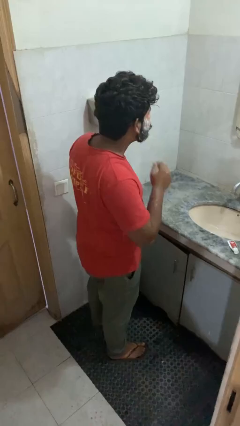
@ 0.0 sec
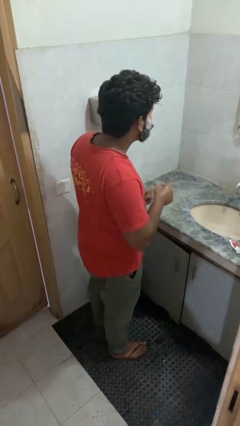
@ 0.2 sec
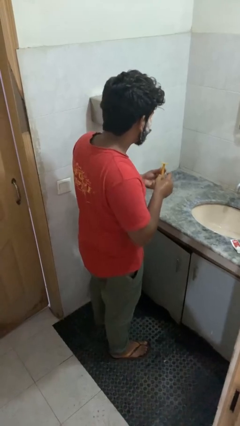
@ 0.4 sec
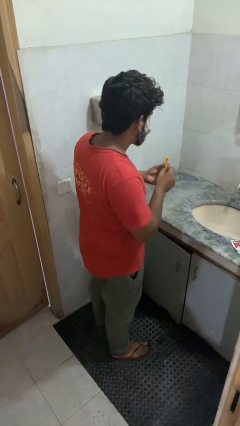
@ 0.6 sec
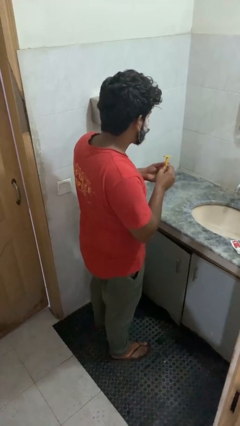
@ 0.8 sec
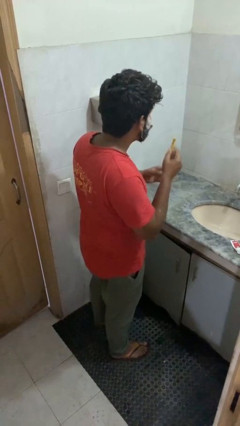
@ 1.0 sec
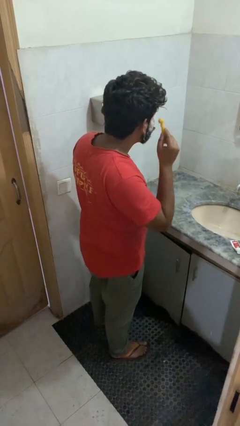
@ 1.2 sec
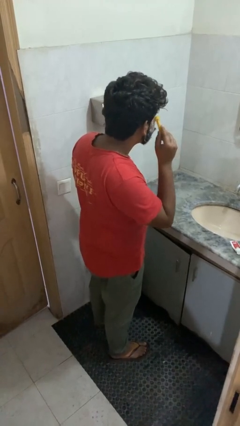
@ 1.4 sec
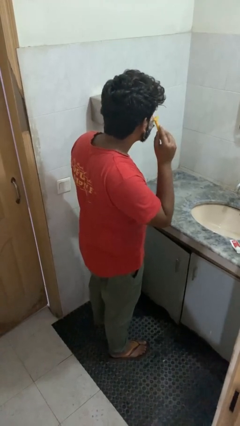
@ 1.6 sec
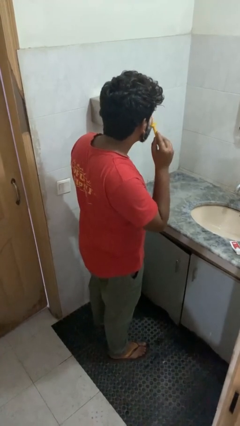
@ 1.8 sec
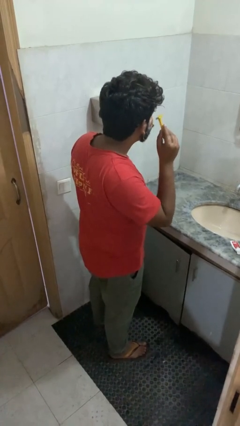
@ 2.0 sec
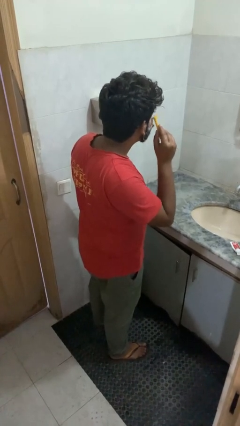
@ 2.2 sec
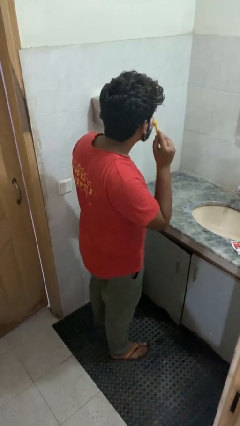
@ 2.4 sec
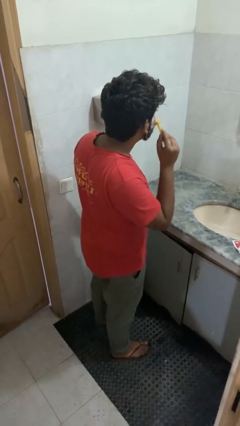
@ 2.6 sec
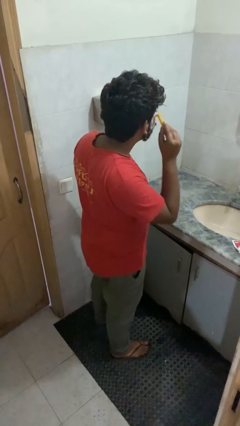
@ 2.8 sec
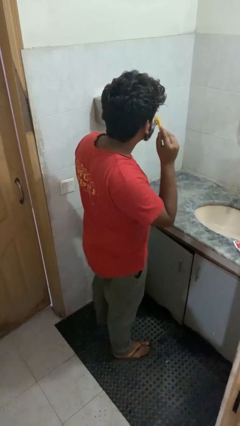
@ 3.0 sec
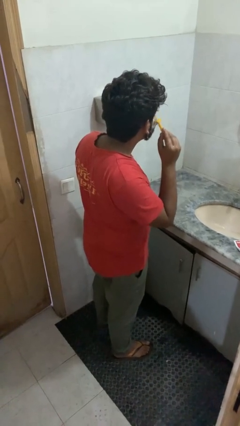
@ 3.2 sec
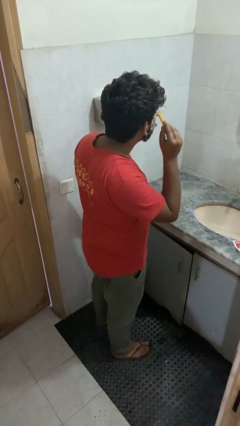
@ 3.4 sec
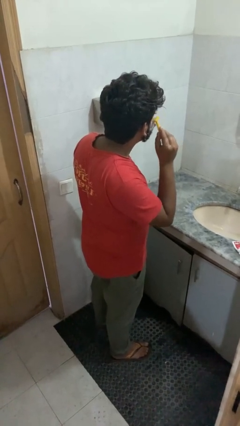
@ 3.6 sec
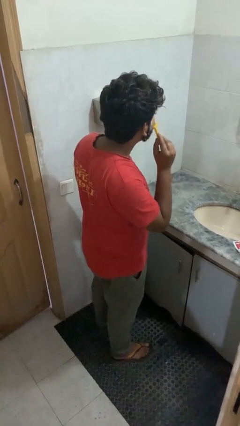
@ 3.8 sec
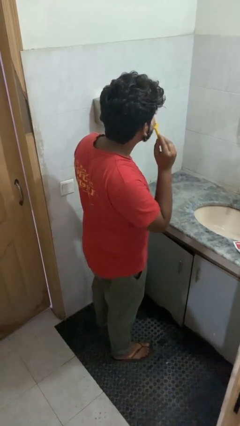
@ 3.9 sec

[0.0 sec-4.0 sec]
person shaves face

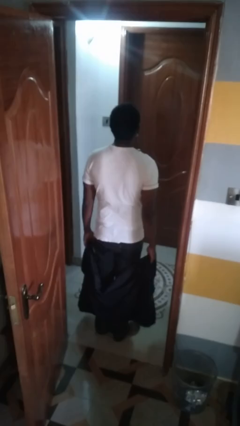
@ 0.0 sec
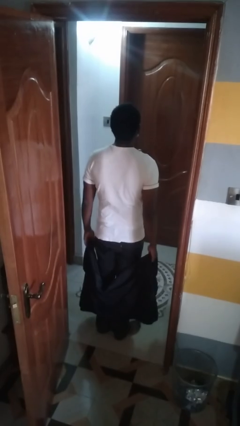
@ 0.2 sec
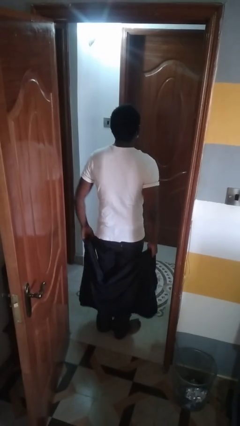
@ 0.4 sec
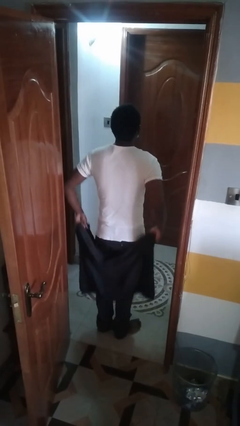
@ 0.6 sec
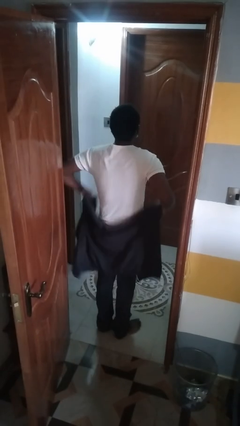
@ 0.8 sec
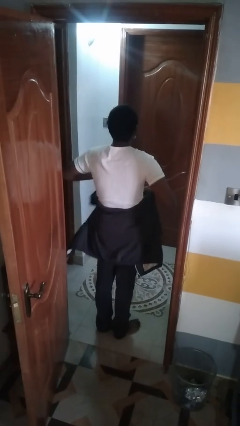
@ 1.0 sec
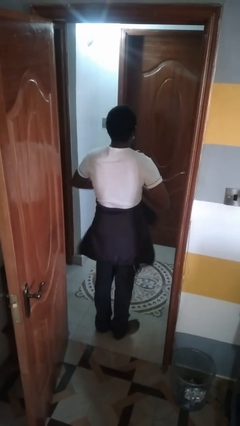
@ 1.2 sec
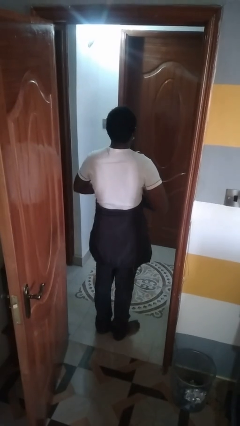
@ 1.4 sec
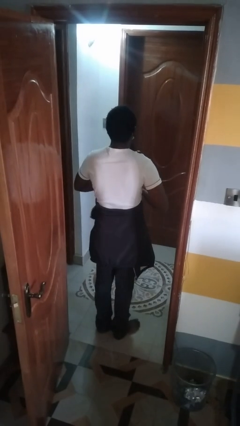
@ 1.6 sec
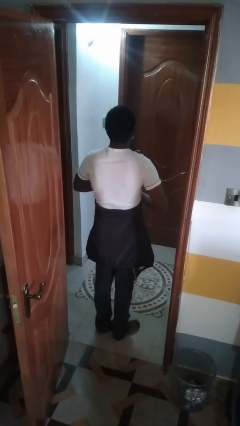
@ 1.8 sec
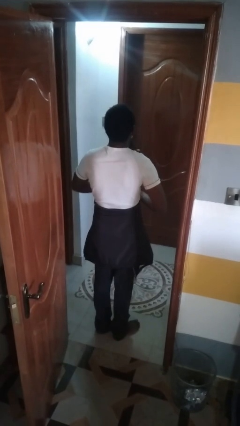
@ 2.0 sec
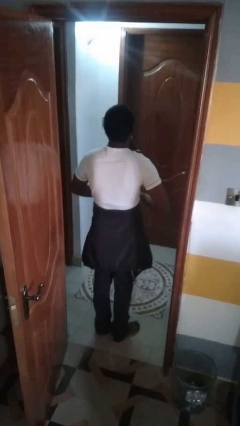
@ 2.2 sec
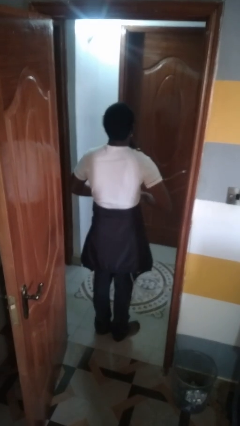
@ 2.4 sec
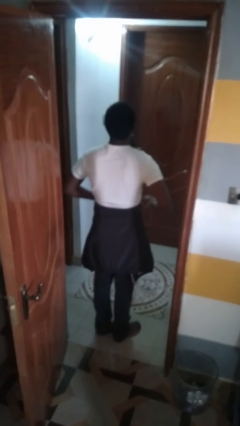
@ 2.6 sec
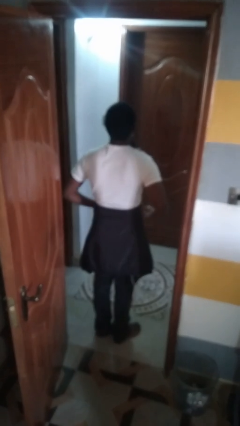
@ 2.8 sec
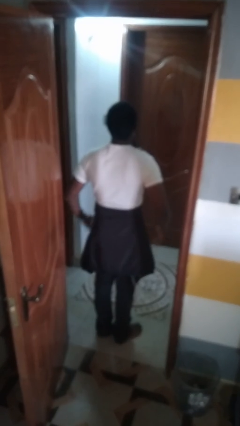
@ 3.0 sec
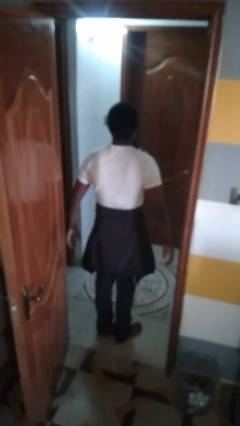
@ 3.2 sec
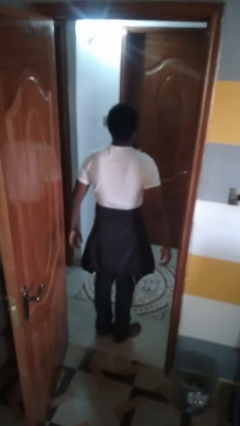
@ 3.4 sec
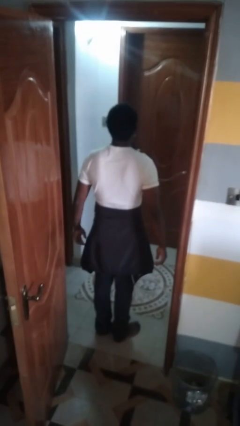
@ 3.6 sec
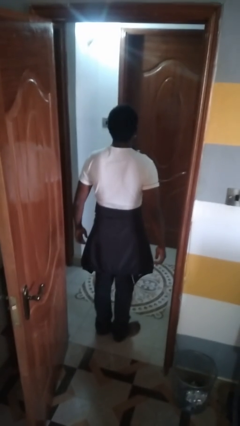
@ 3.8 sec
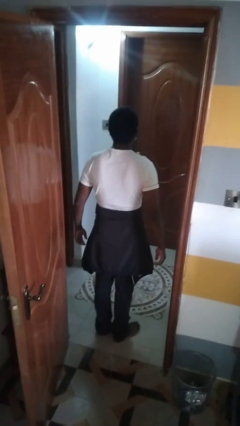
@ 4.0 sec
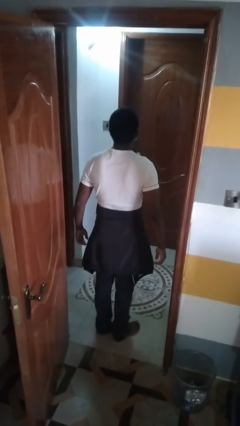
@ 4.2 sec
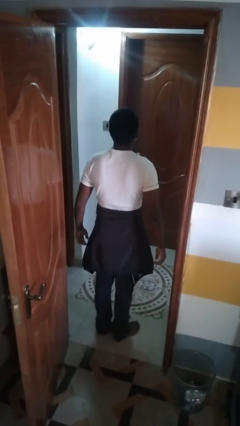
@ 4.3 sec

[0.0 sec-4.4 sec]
person ties jacket around waist

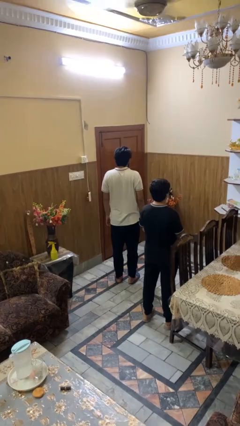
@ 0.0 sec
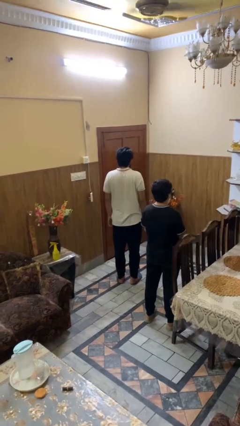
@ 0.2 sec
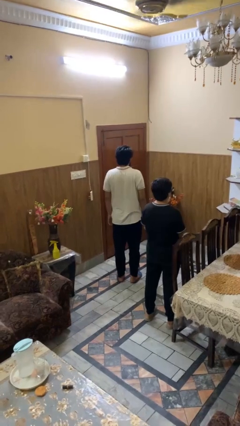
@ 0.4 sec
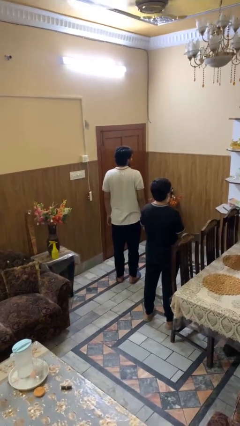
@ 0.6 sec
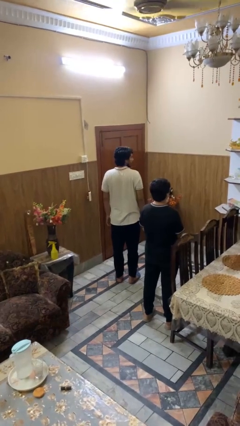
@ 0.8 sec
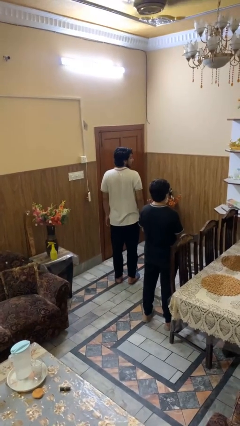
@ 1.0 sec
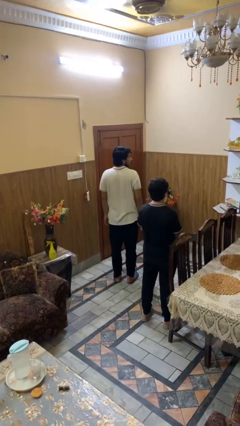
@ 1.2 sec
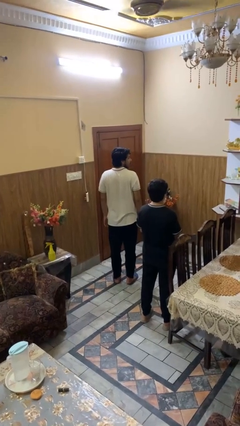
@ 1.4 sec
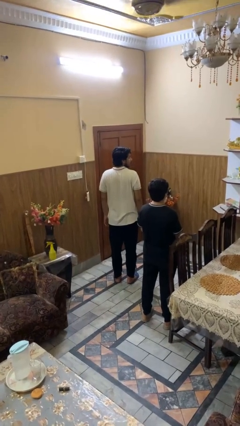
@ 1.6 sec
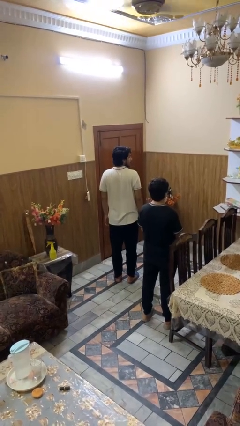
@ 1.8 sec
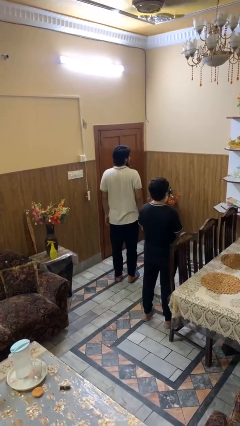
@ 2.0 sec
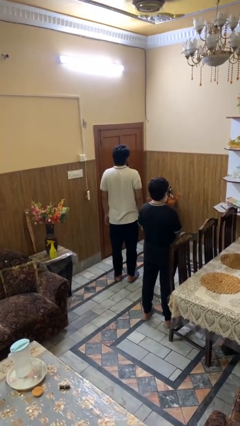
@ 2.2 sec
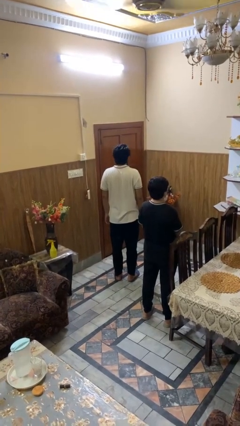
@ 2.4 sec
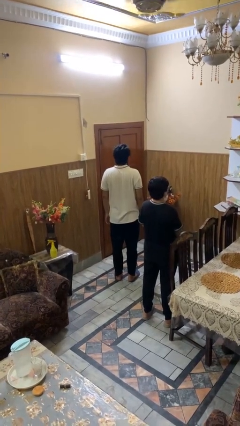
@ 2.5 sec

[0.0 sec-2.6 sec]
person looks over shoulder

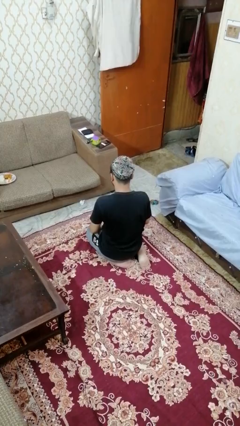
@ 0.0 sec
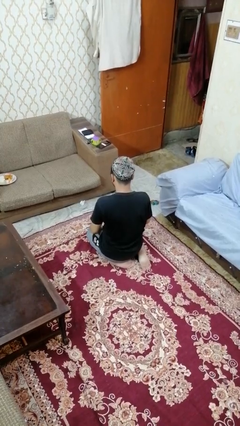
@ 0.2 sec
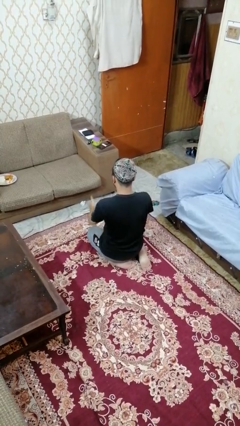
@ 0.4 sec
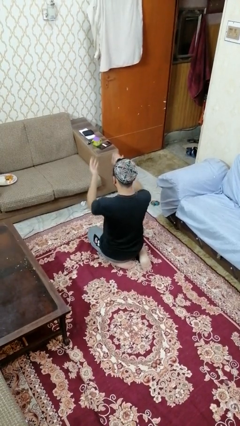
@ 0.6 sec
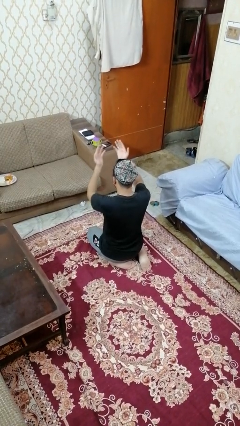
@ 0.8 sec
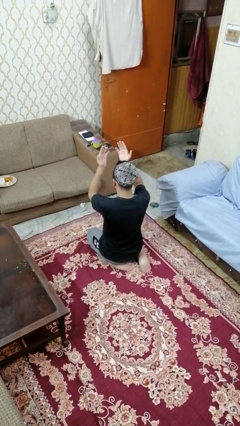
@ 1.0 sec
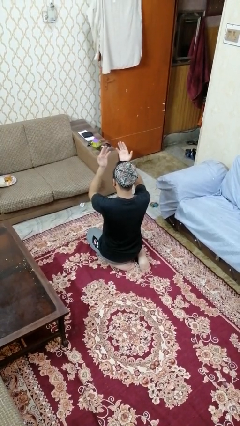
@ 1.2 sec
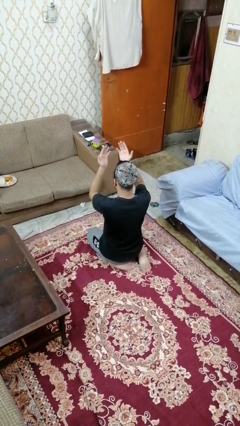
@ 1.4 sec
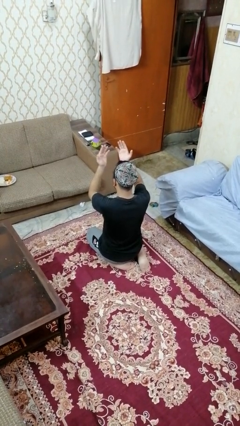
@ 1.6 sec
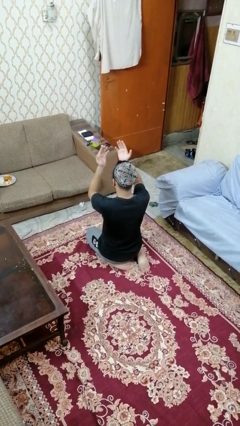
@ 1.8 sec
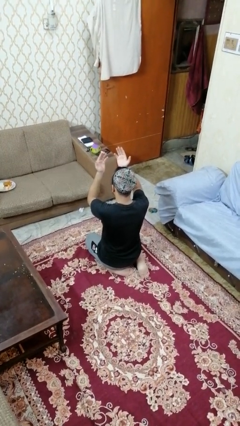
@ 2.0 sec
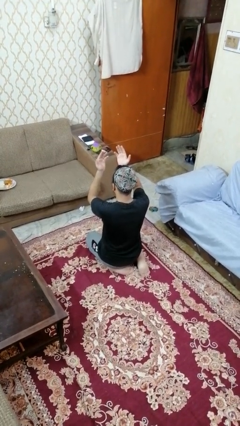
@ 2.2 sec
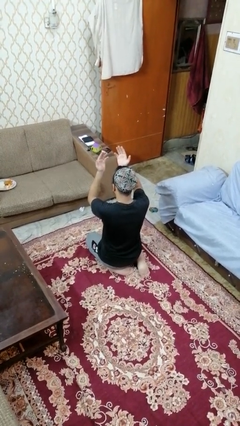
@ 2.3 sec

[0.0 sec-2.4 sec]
person prays

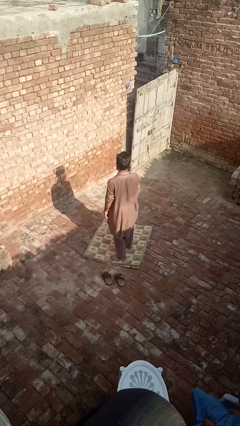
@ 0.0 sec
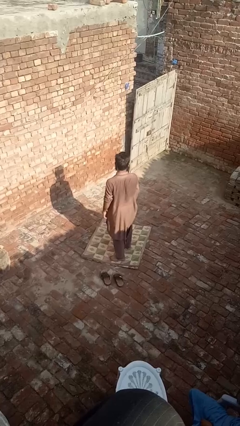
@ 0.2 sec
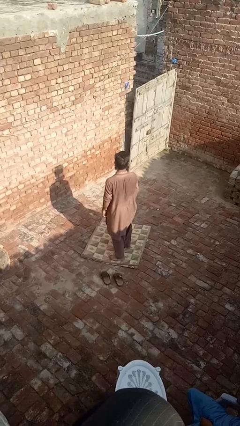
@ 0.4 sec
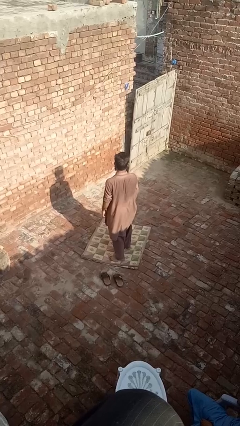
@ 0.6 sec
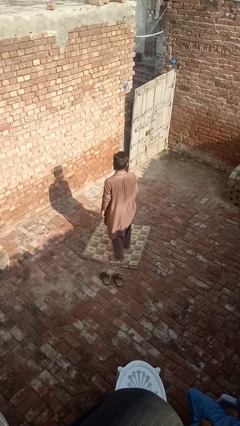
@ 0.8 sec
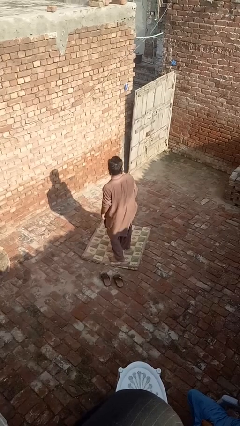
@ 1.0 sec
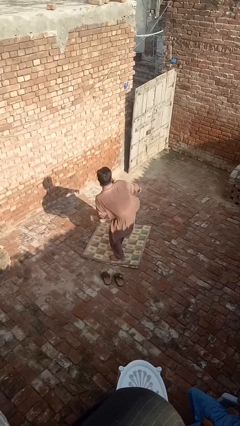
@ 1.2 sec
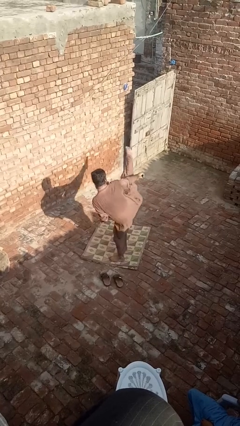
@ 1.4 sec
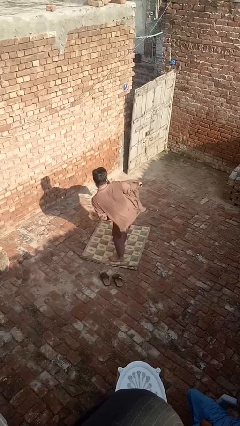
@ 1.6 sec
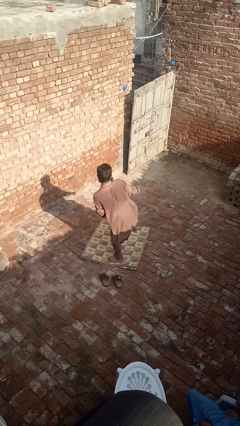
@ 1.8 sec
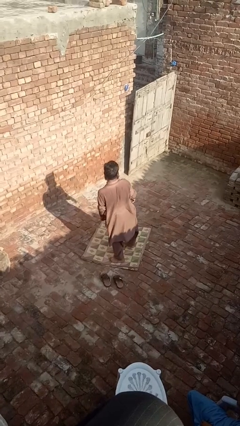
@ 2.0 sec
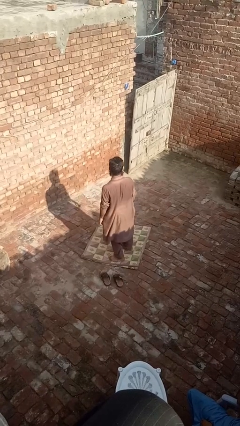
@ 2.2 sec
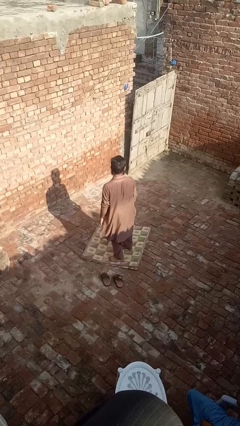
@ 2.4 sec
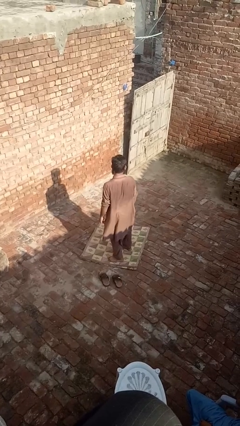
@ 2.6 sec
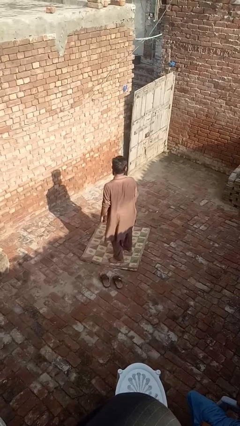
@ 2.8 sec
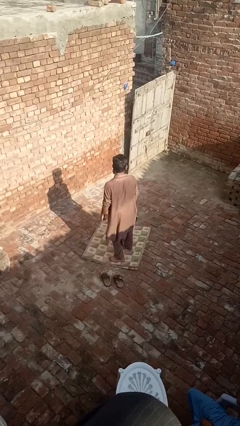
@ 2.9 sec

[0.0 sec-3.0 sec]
person karate kicks

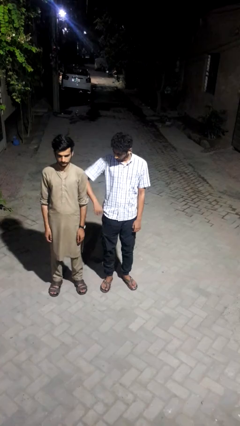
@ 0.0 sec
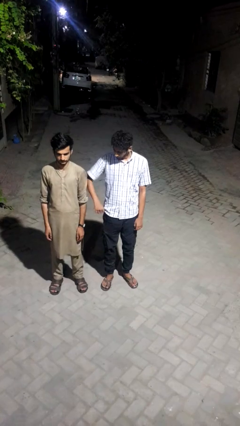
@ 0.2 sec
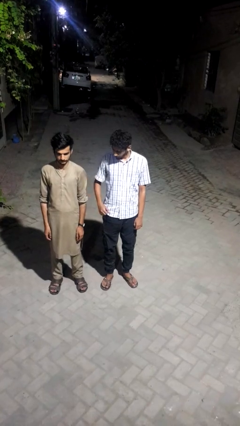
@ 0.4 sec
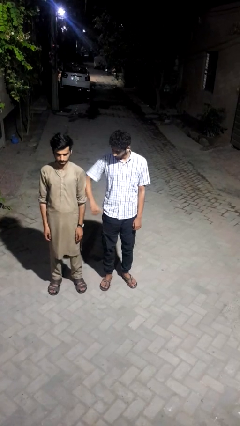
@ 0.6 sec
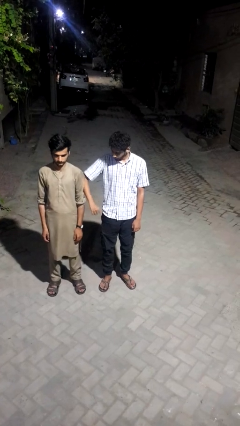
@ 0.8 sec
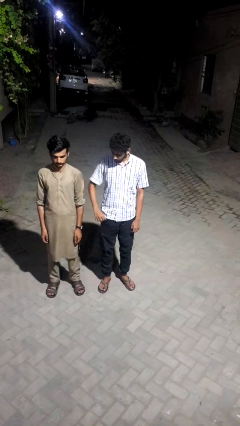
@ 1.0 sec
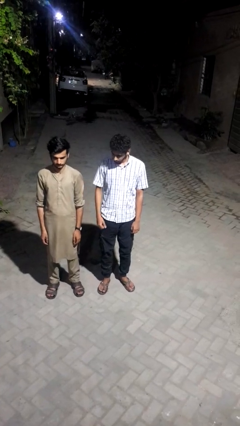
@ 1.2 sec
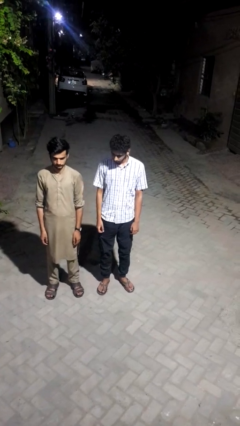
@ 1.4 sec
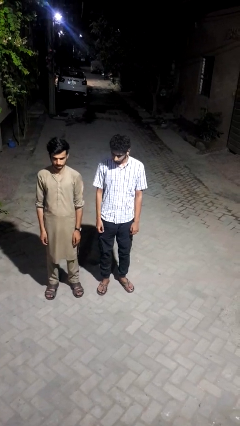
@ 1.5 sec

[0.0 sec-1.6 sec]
person nudges person with elbow
